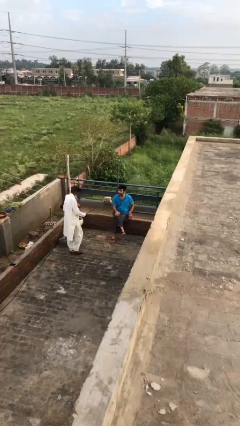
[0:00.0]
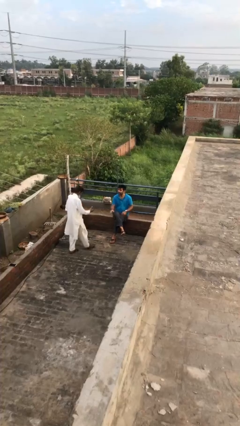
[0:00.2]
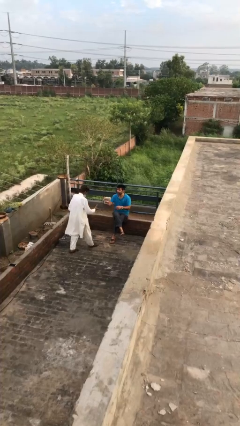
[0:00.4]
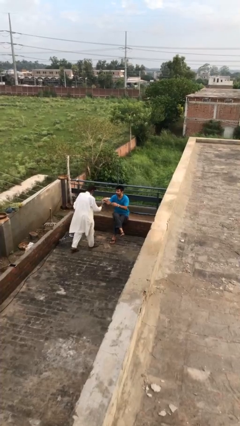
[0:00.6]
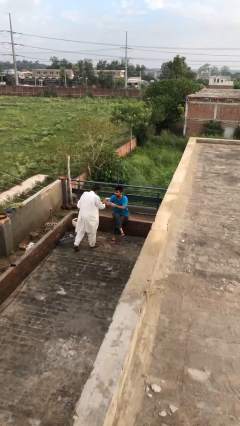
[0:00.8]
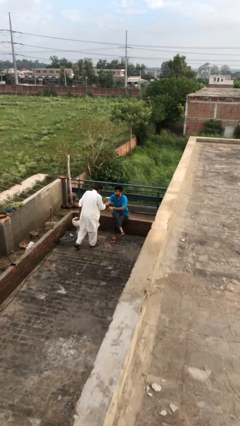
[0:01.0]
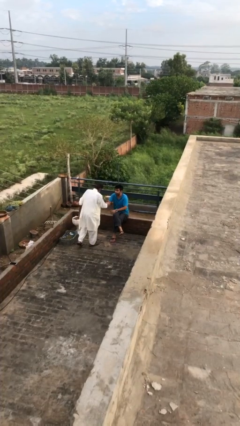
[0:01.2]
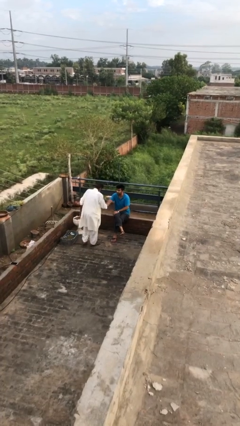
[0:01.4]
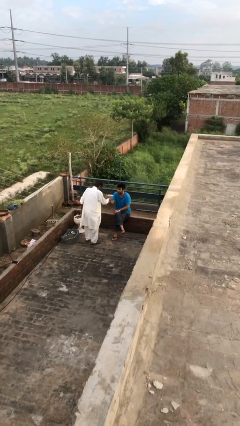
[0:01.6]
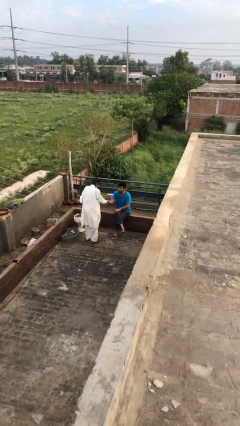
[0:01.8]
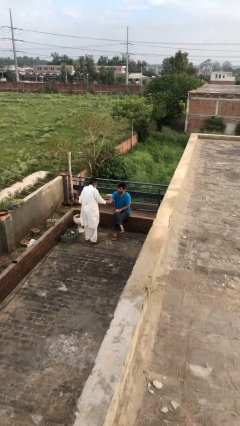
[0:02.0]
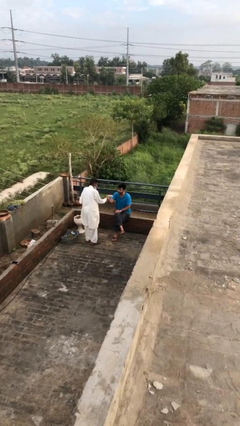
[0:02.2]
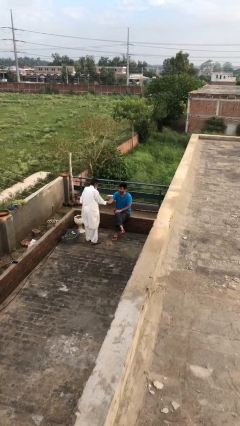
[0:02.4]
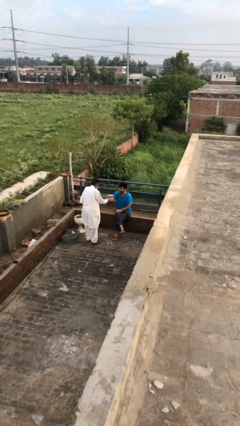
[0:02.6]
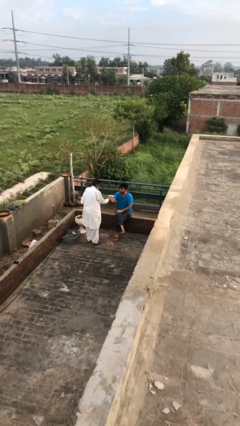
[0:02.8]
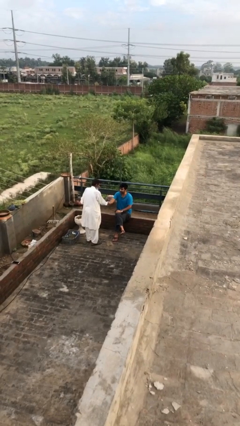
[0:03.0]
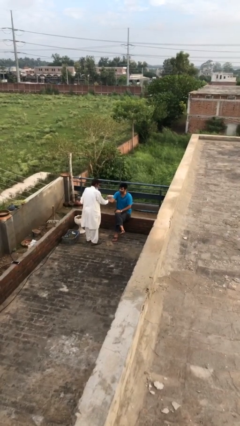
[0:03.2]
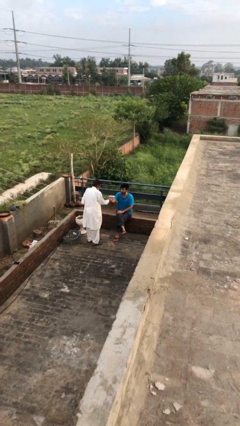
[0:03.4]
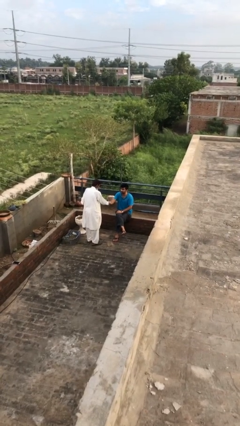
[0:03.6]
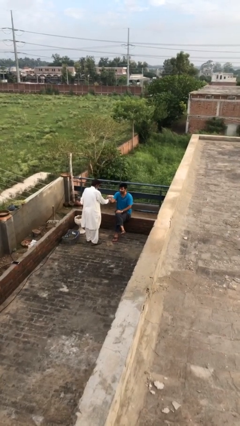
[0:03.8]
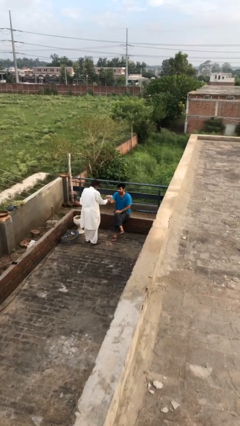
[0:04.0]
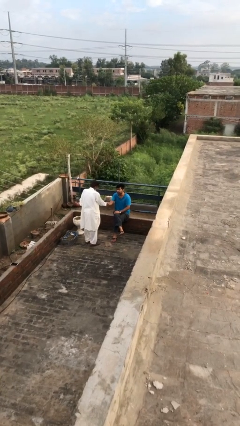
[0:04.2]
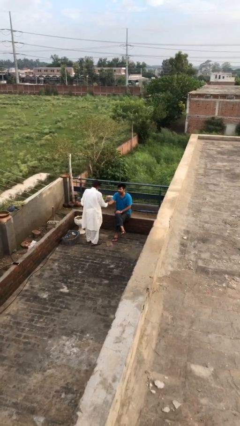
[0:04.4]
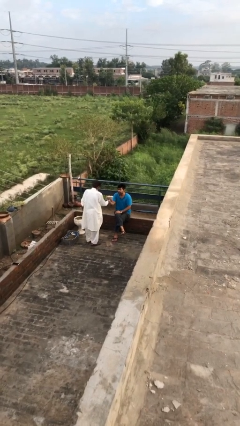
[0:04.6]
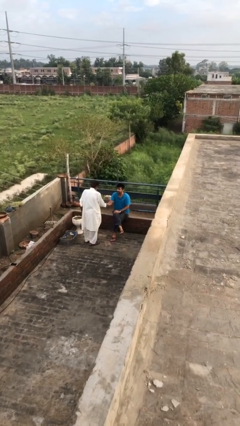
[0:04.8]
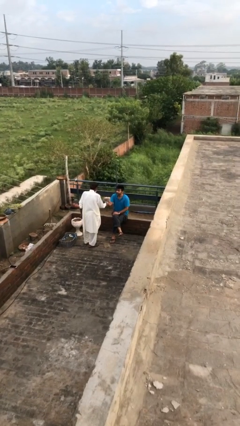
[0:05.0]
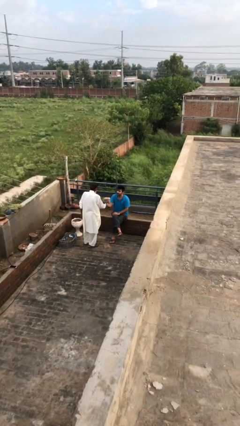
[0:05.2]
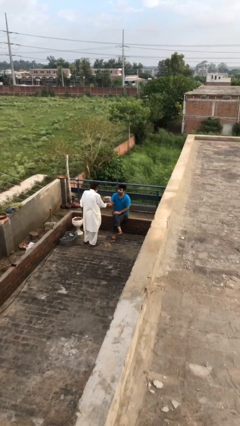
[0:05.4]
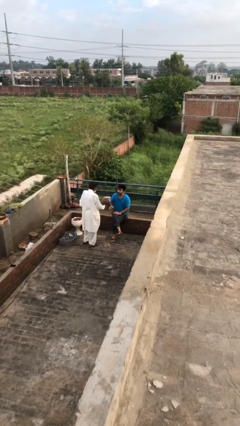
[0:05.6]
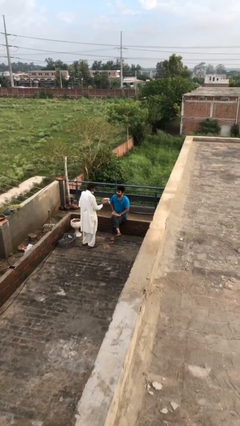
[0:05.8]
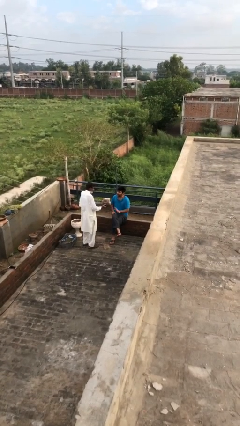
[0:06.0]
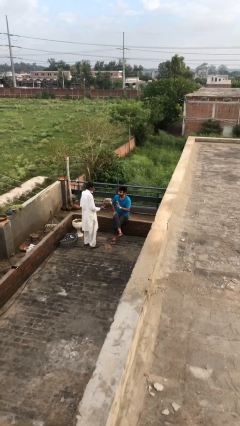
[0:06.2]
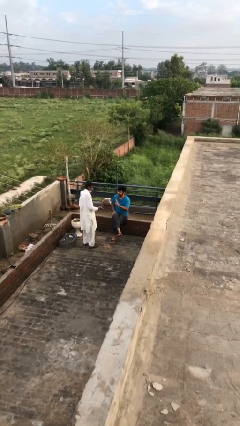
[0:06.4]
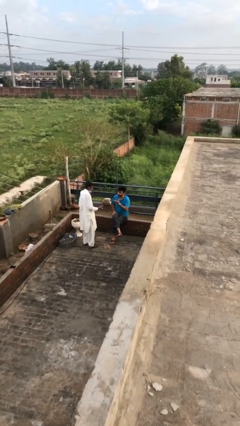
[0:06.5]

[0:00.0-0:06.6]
person shakes hand

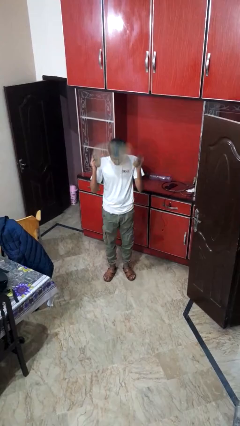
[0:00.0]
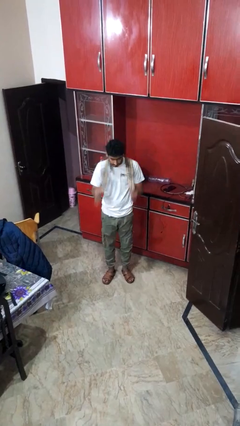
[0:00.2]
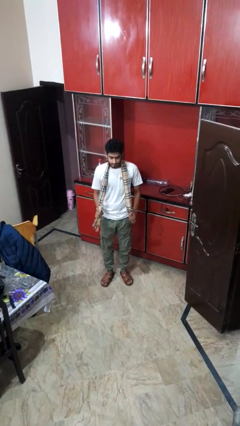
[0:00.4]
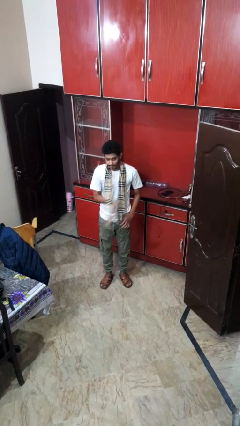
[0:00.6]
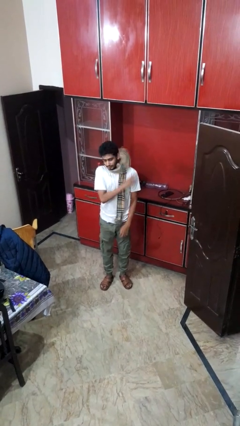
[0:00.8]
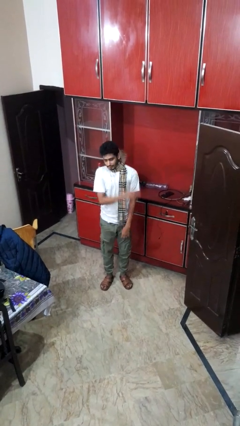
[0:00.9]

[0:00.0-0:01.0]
person puts on scarf

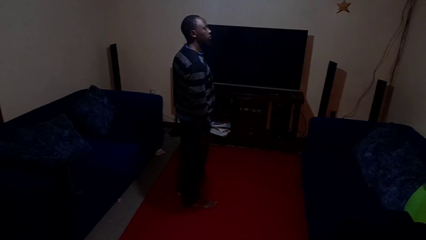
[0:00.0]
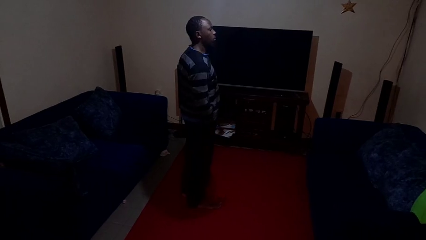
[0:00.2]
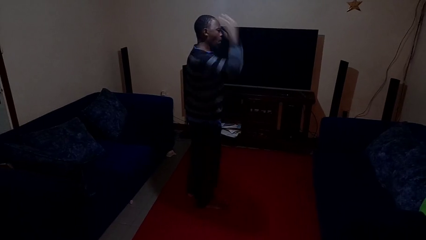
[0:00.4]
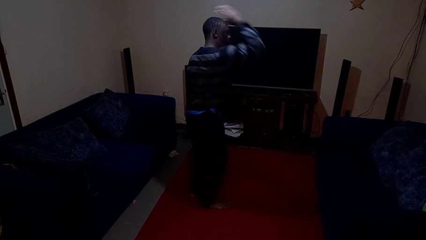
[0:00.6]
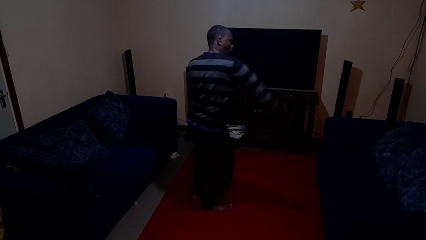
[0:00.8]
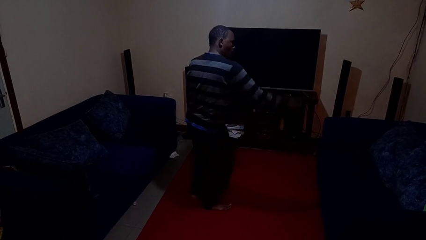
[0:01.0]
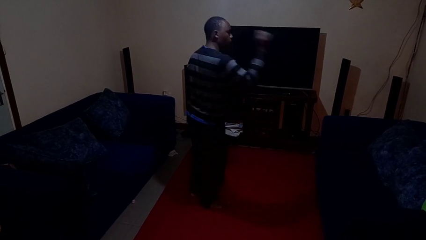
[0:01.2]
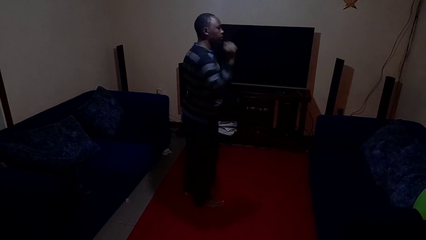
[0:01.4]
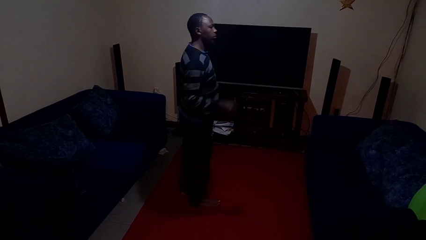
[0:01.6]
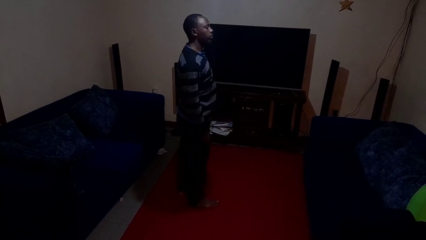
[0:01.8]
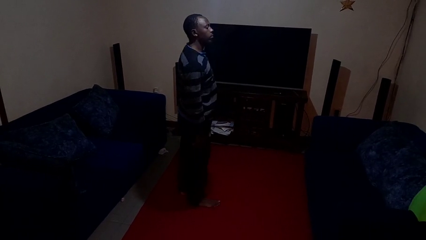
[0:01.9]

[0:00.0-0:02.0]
person crosses arms

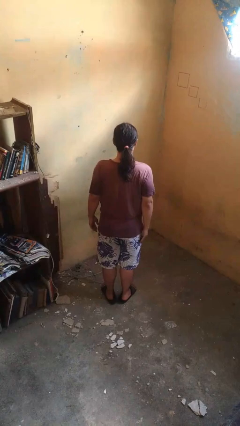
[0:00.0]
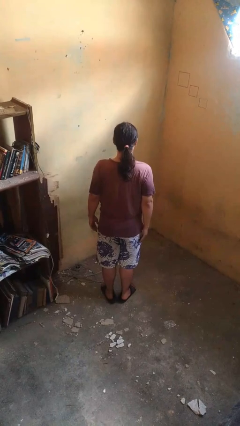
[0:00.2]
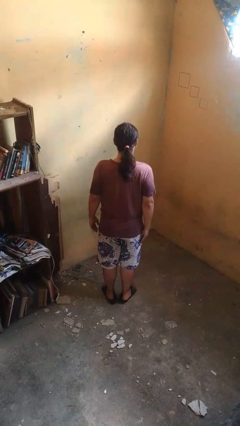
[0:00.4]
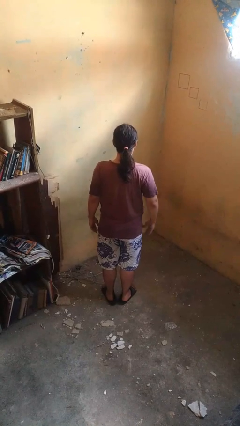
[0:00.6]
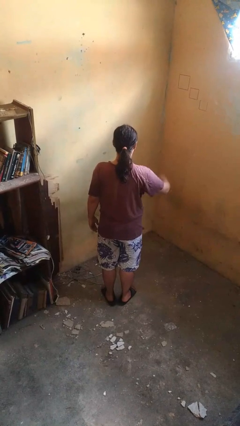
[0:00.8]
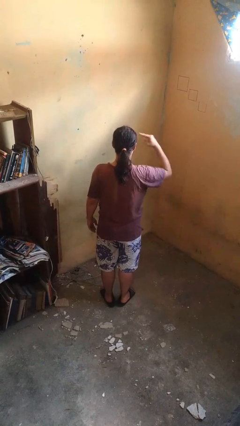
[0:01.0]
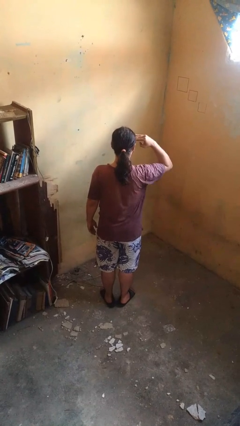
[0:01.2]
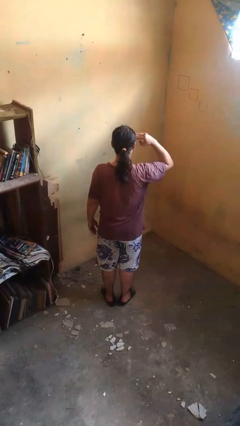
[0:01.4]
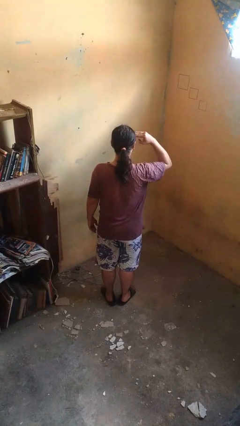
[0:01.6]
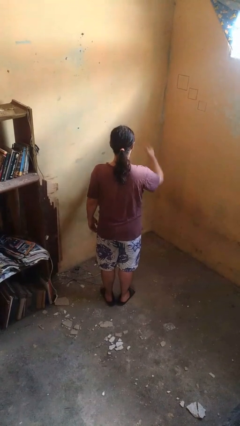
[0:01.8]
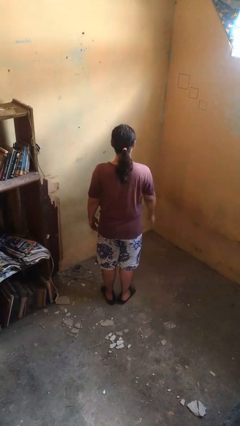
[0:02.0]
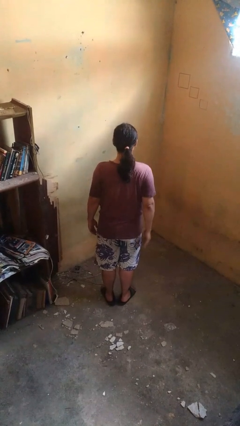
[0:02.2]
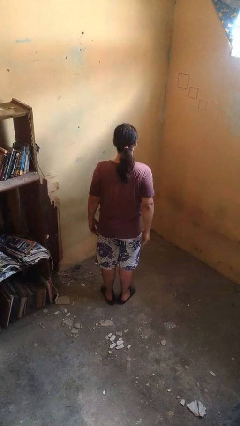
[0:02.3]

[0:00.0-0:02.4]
person salutes

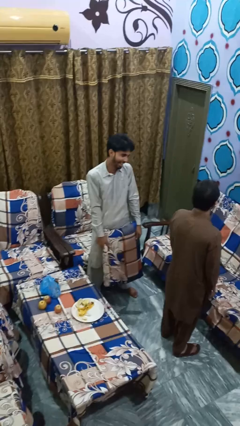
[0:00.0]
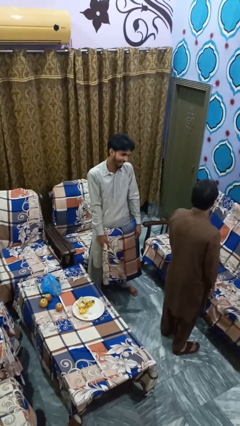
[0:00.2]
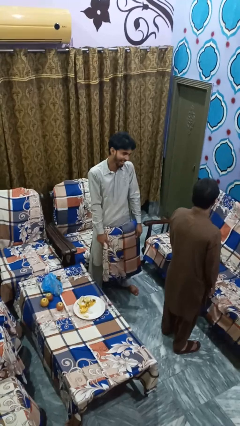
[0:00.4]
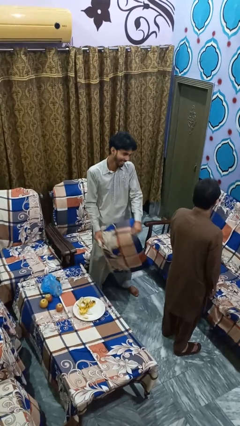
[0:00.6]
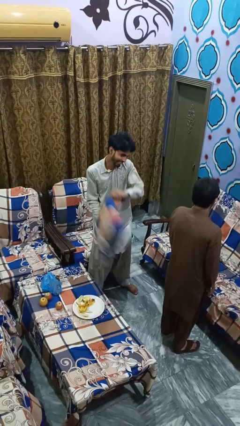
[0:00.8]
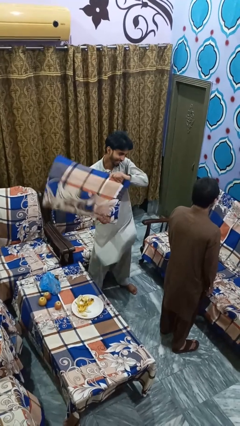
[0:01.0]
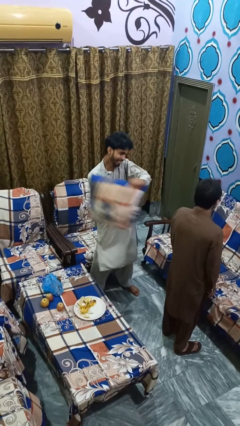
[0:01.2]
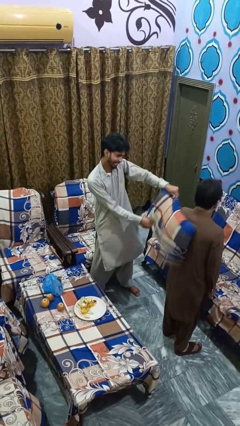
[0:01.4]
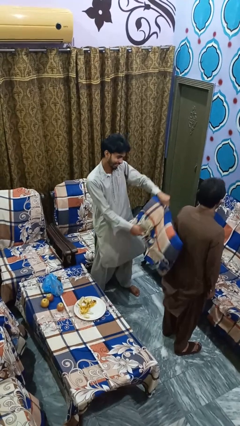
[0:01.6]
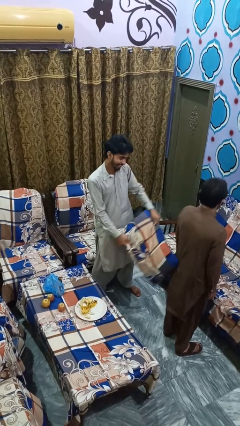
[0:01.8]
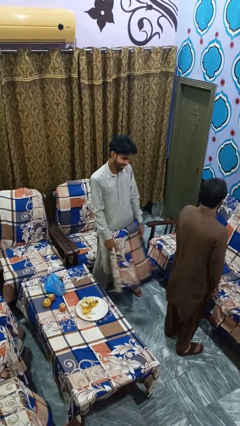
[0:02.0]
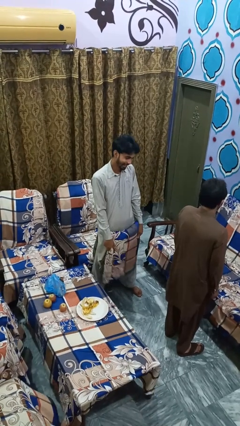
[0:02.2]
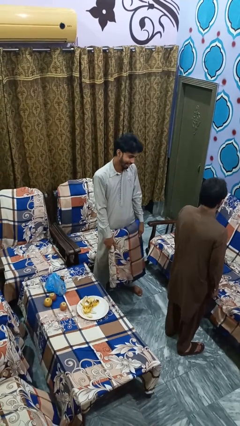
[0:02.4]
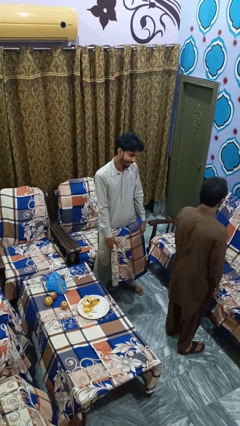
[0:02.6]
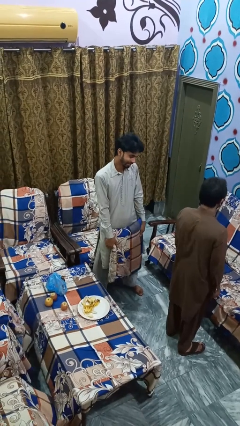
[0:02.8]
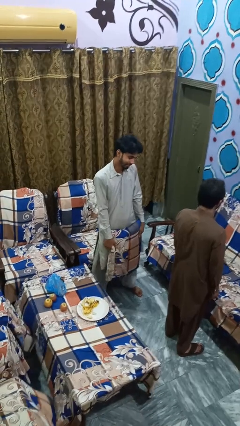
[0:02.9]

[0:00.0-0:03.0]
person hits person with pillow

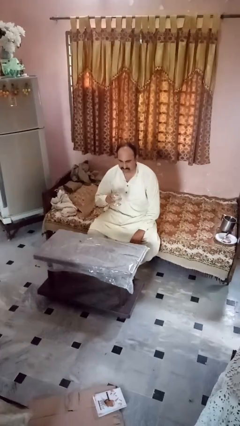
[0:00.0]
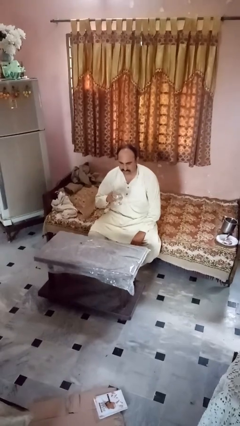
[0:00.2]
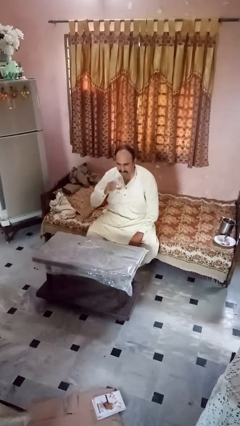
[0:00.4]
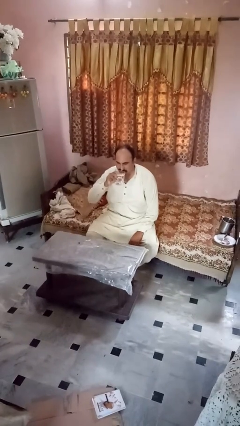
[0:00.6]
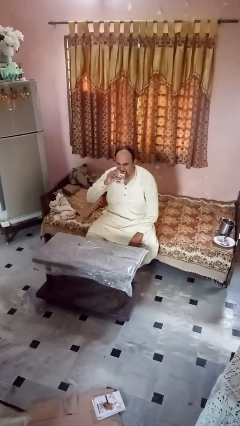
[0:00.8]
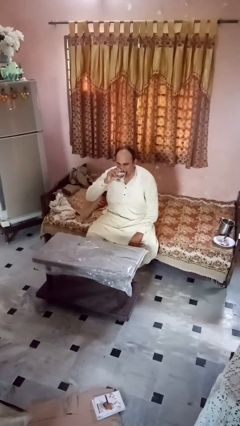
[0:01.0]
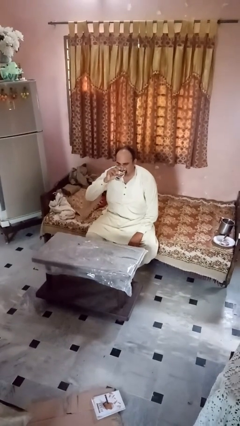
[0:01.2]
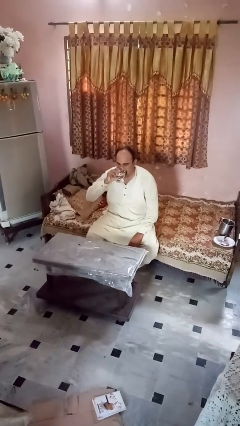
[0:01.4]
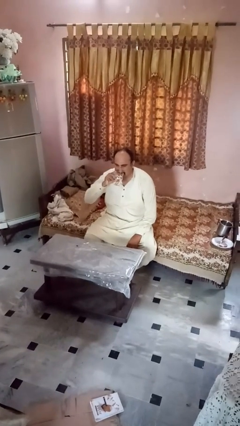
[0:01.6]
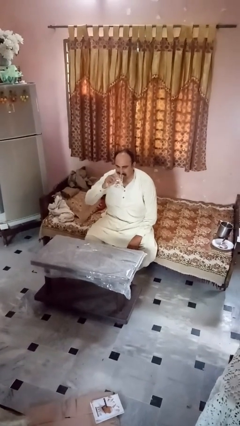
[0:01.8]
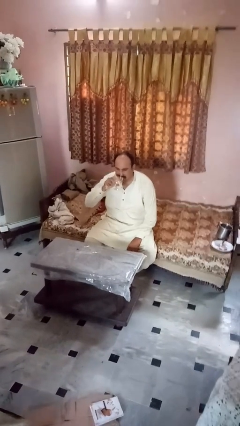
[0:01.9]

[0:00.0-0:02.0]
person drinks from shotglass

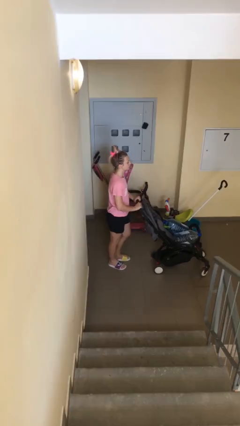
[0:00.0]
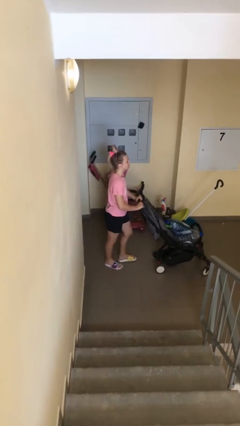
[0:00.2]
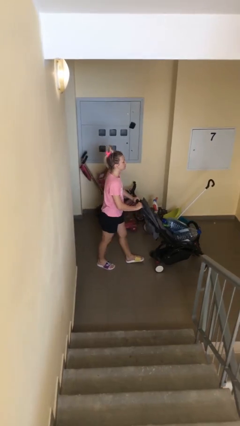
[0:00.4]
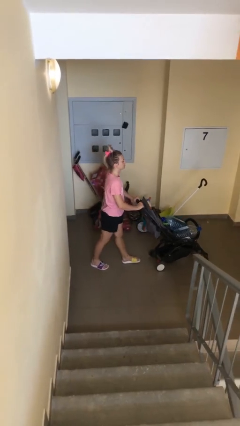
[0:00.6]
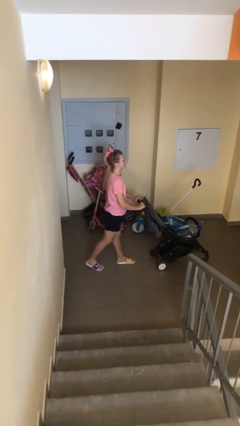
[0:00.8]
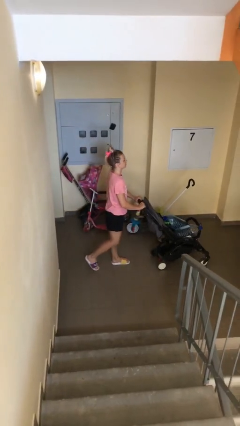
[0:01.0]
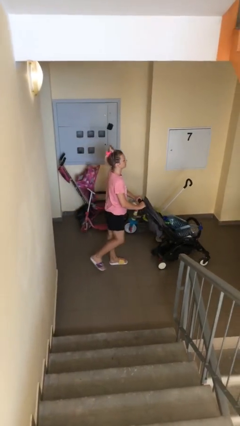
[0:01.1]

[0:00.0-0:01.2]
person pushes wheeled cart
